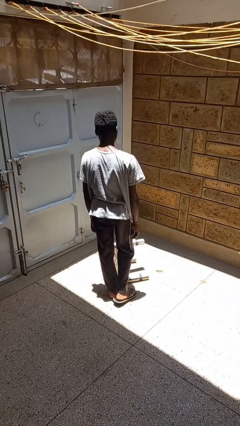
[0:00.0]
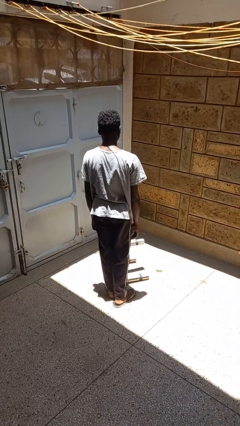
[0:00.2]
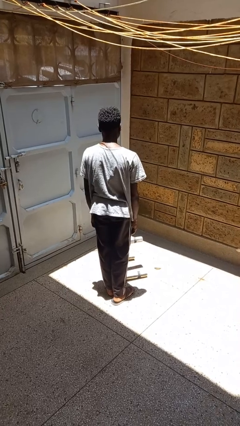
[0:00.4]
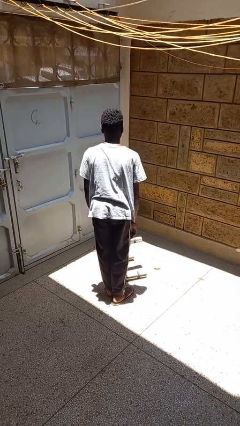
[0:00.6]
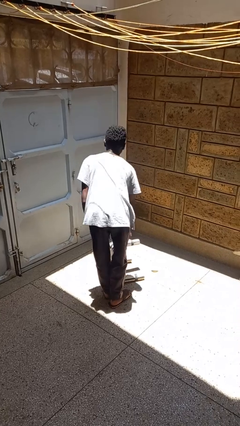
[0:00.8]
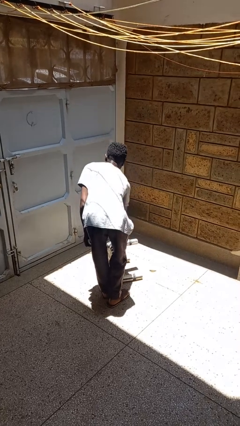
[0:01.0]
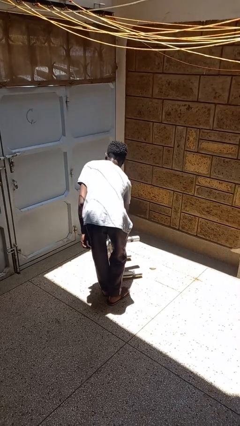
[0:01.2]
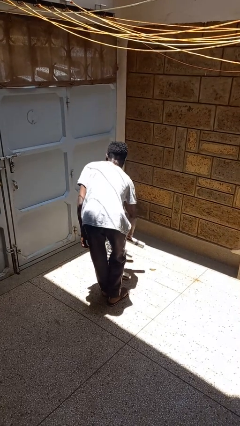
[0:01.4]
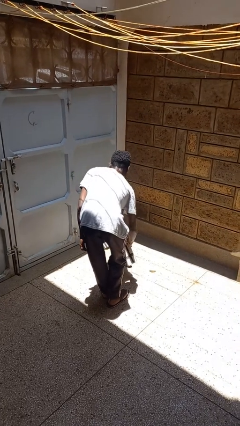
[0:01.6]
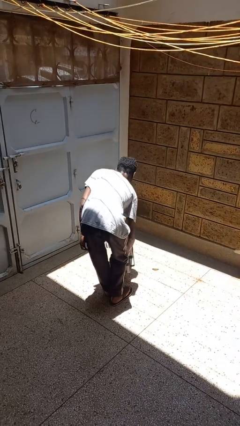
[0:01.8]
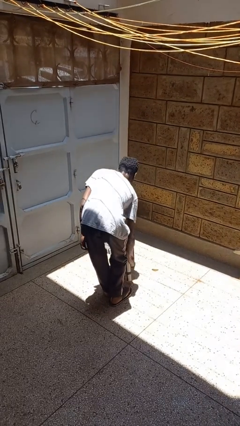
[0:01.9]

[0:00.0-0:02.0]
person sets upright furniture

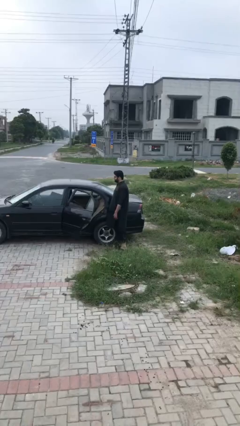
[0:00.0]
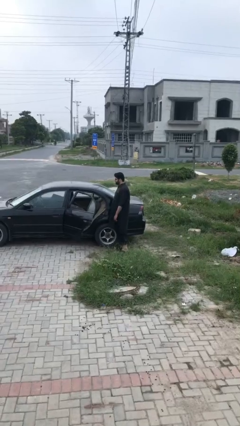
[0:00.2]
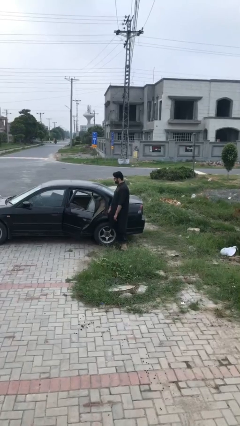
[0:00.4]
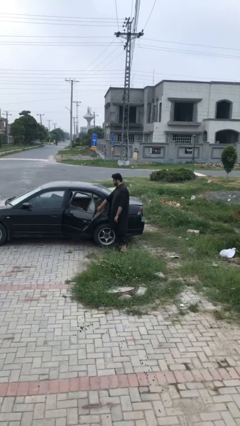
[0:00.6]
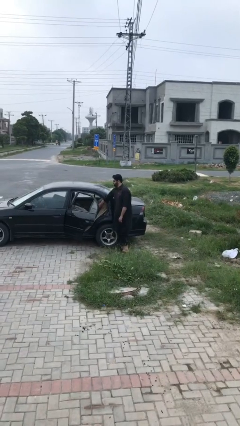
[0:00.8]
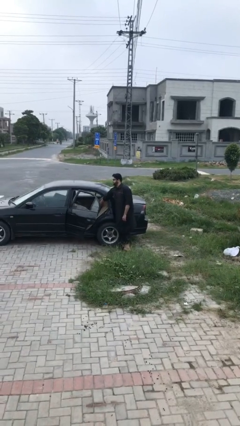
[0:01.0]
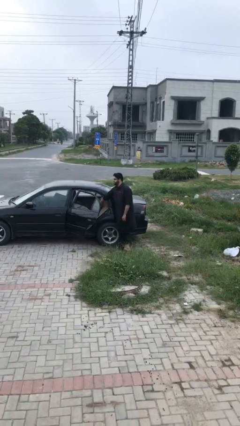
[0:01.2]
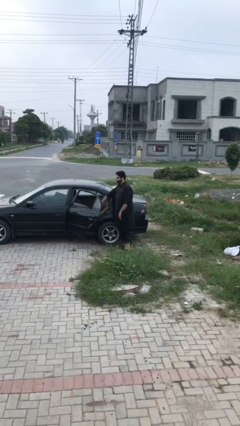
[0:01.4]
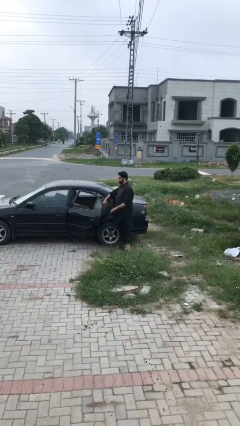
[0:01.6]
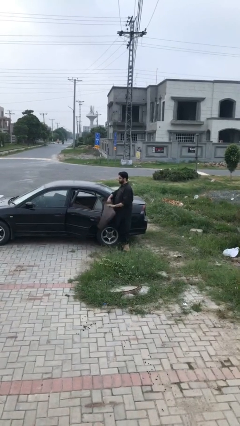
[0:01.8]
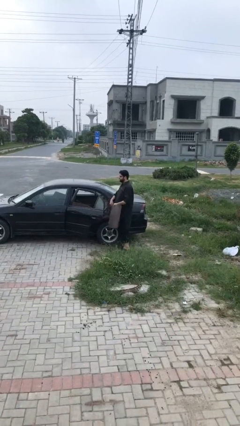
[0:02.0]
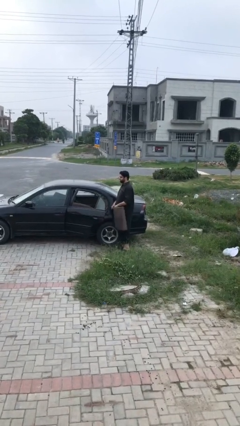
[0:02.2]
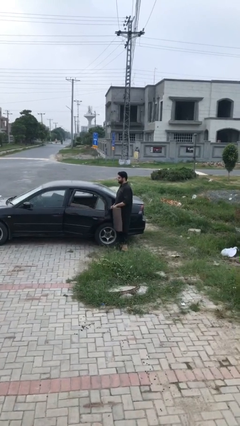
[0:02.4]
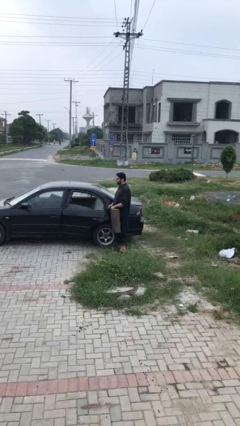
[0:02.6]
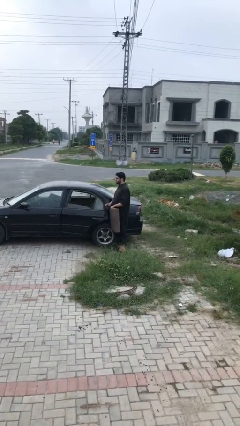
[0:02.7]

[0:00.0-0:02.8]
person unloads car

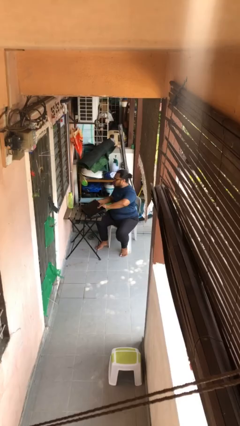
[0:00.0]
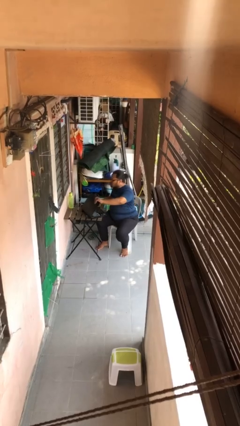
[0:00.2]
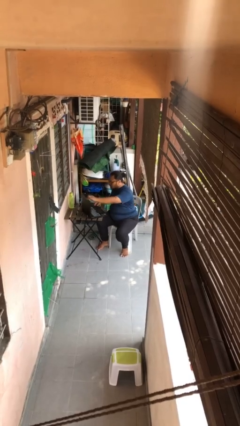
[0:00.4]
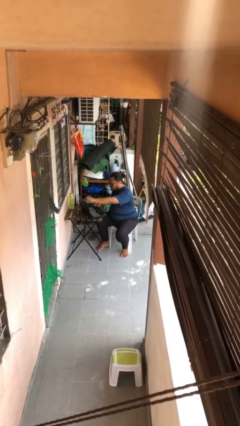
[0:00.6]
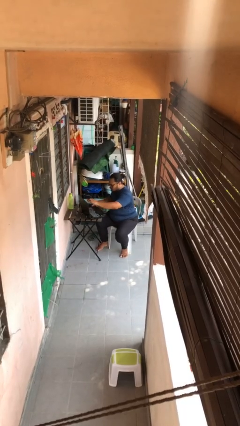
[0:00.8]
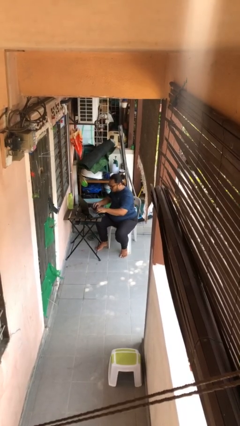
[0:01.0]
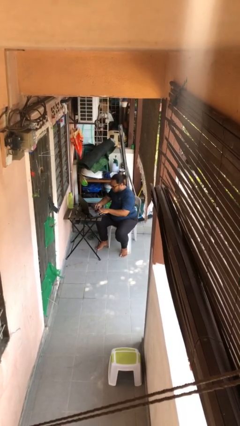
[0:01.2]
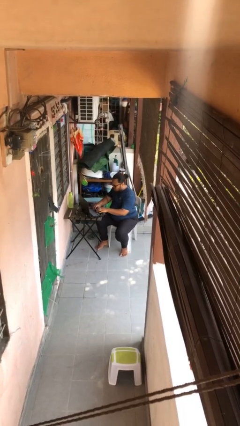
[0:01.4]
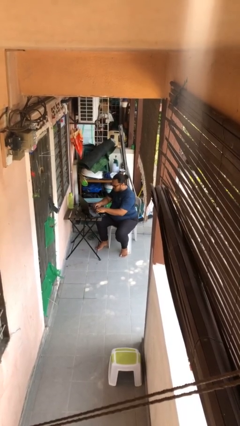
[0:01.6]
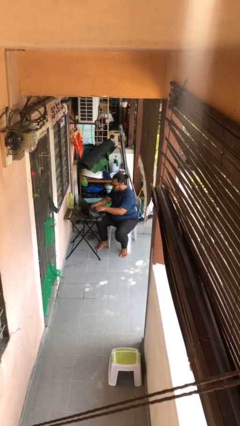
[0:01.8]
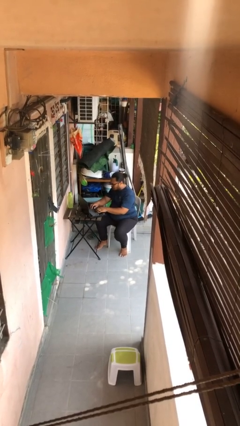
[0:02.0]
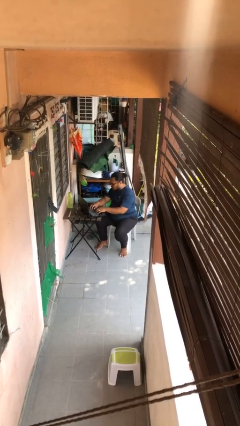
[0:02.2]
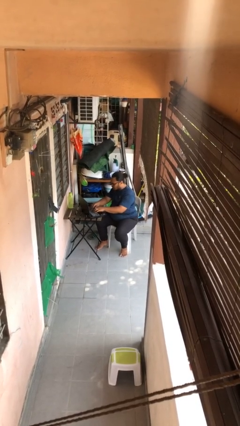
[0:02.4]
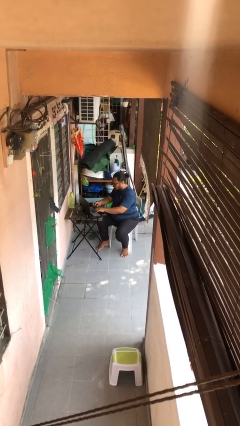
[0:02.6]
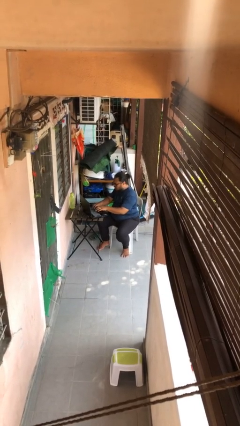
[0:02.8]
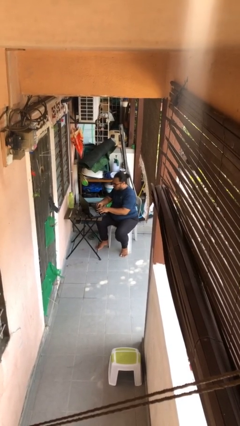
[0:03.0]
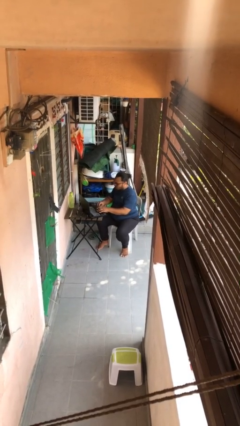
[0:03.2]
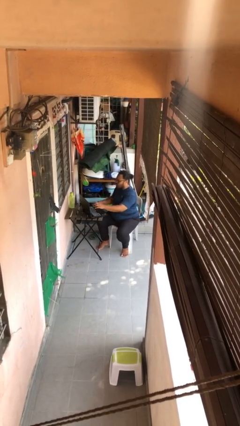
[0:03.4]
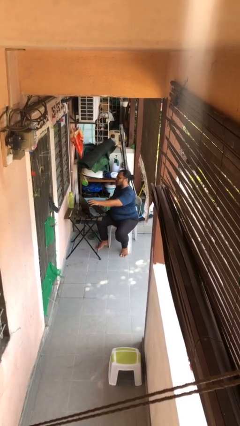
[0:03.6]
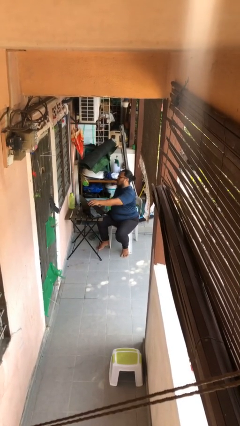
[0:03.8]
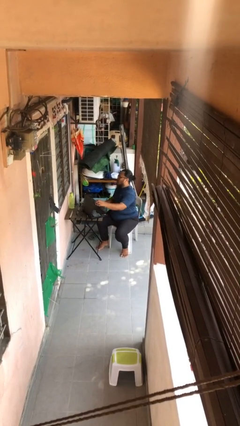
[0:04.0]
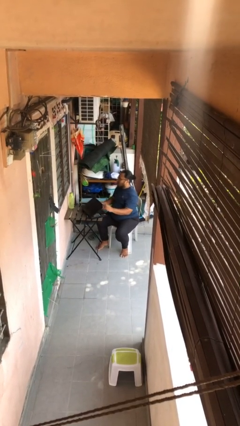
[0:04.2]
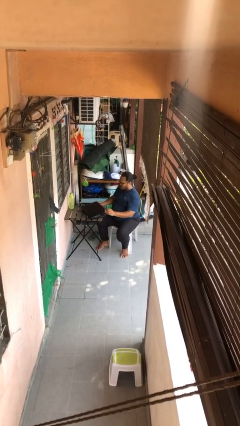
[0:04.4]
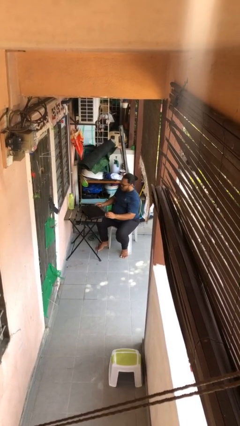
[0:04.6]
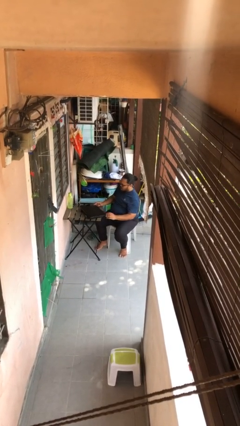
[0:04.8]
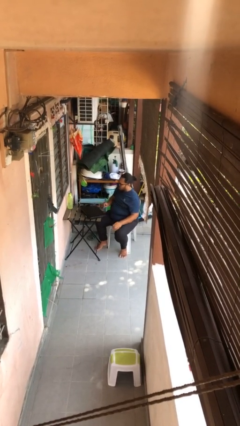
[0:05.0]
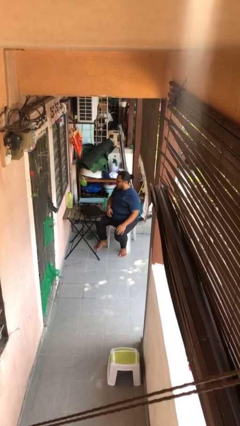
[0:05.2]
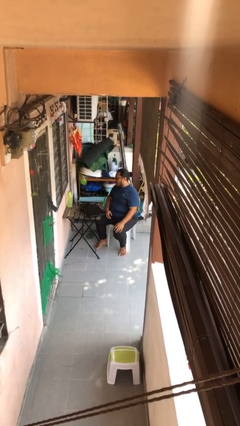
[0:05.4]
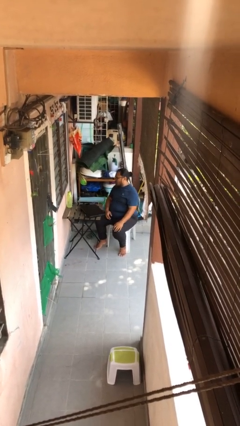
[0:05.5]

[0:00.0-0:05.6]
person interacts with laptop

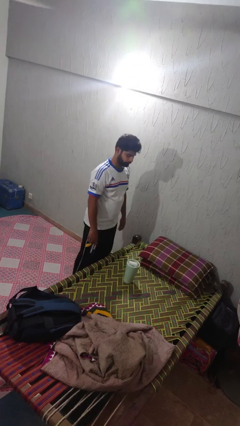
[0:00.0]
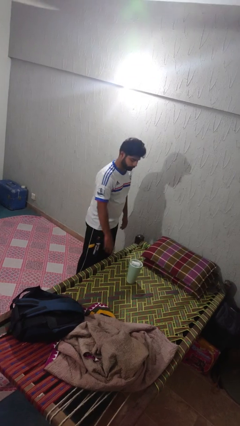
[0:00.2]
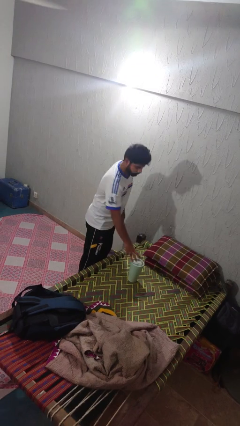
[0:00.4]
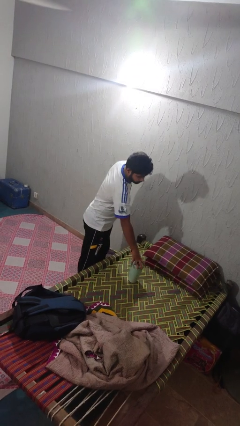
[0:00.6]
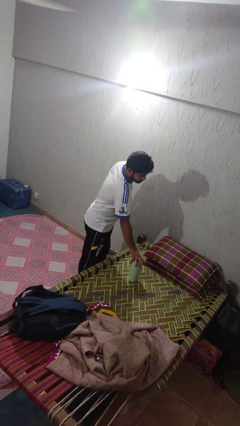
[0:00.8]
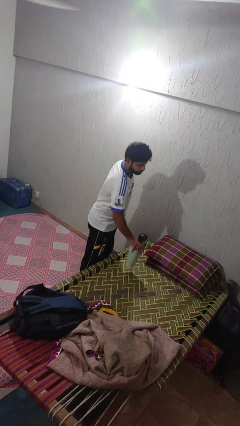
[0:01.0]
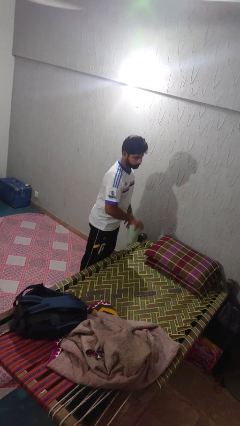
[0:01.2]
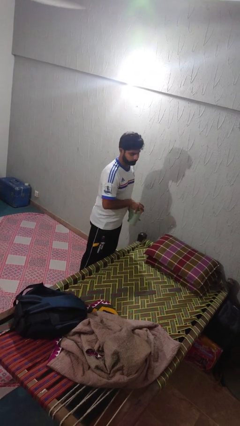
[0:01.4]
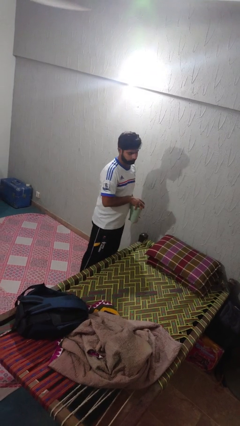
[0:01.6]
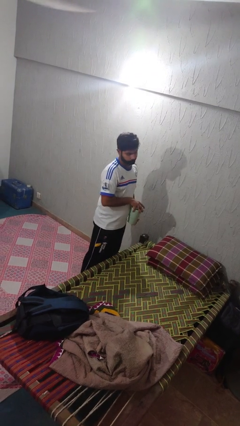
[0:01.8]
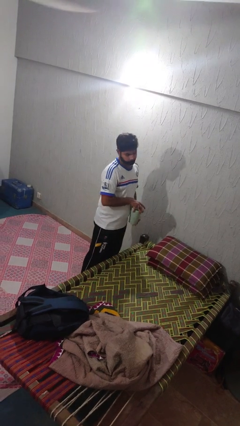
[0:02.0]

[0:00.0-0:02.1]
person picks up object from bed

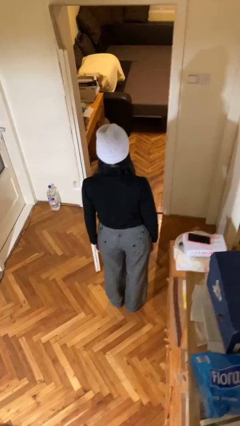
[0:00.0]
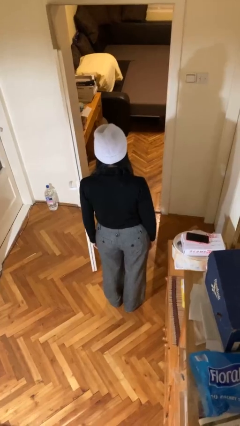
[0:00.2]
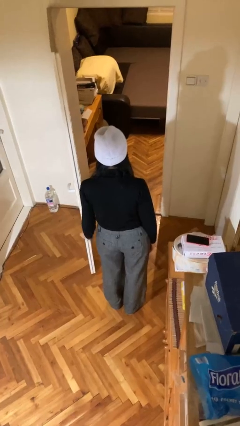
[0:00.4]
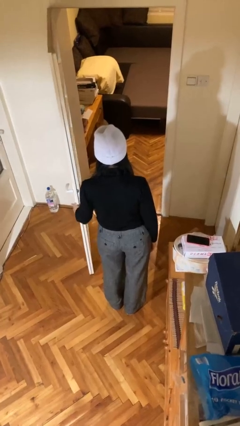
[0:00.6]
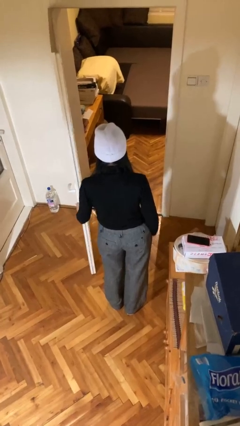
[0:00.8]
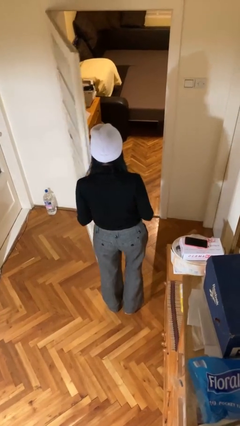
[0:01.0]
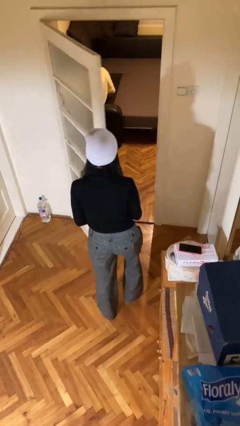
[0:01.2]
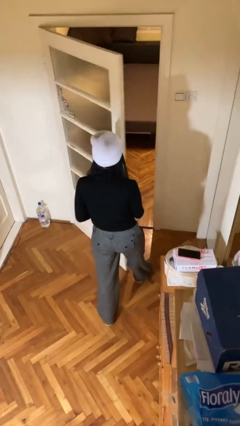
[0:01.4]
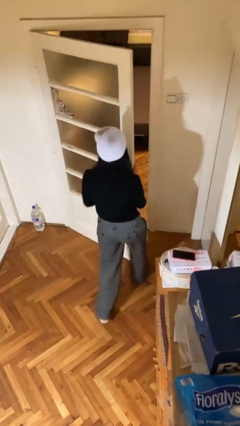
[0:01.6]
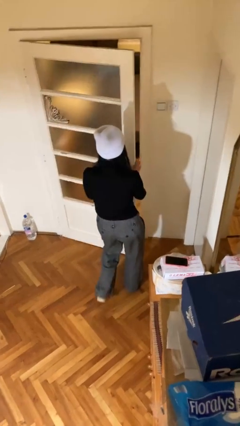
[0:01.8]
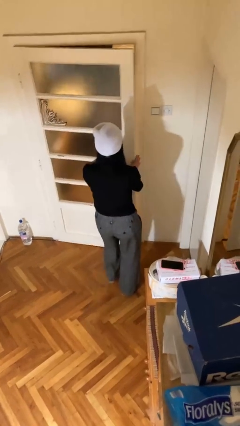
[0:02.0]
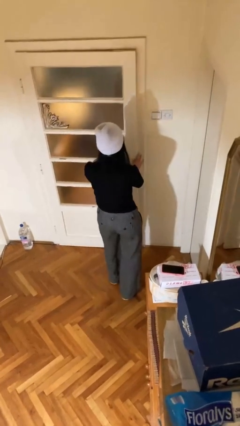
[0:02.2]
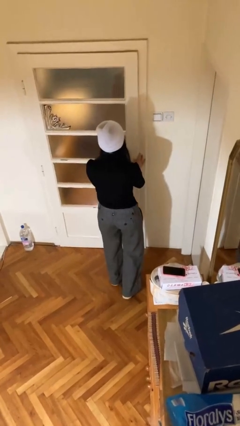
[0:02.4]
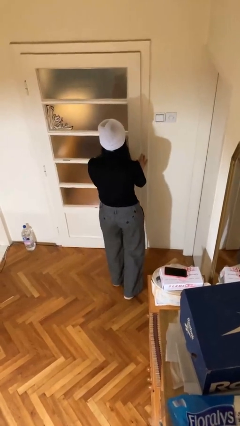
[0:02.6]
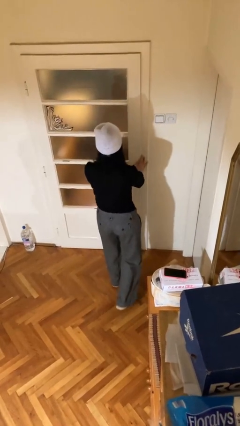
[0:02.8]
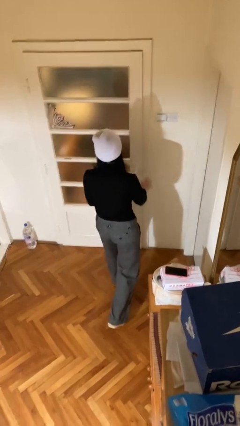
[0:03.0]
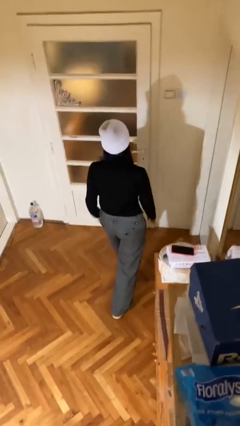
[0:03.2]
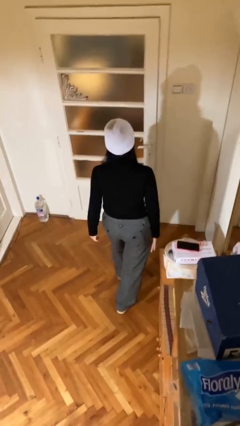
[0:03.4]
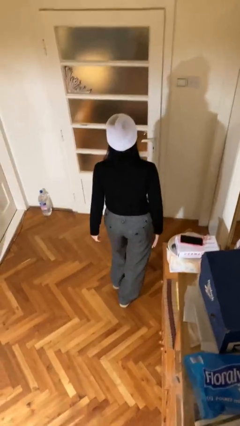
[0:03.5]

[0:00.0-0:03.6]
person closes facility door

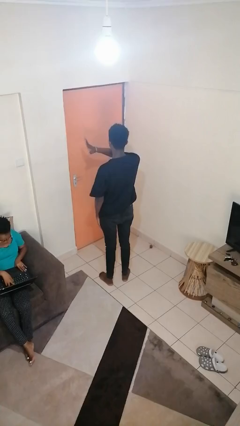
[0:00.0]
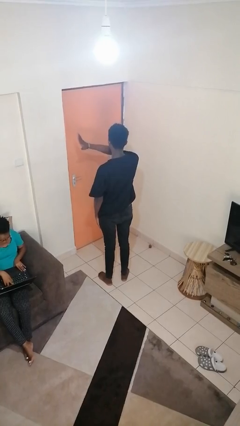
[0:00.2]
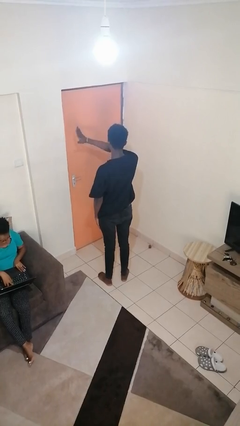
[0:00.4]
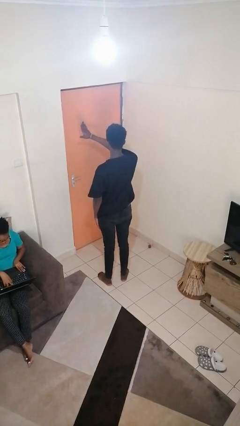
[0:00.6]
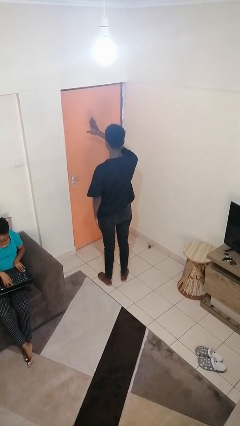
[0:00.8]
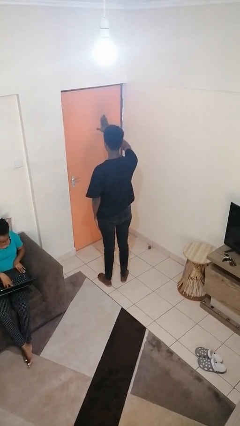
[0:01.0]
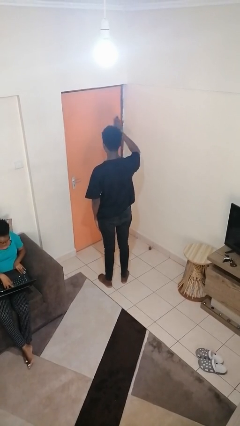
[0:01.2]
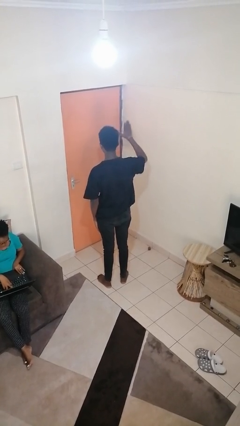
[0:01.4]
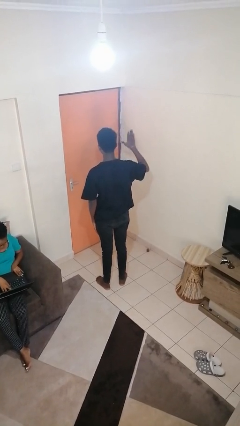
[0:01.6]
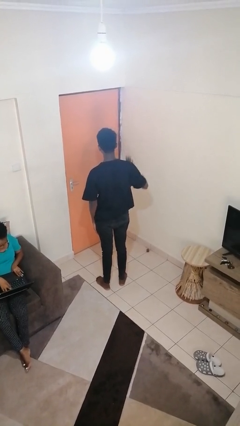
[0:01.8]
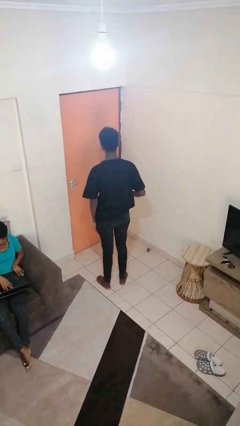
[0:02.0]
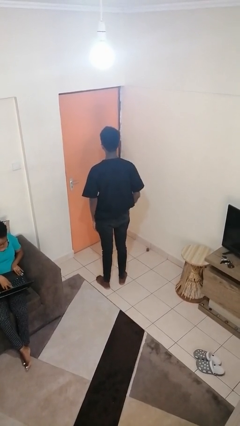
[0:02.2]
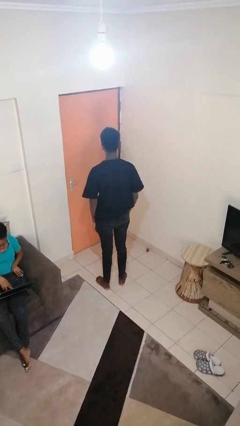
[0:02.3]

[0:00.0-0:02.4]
person gestures swipe right
